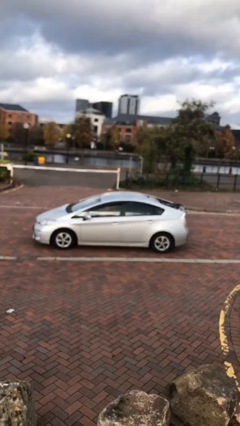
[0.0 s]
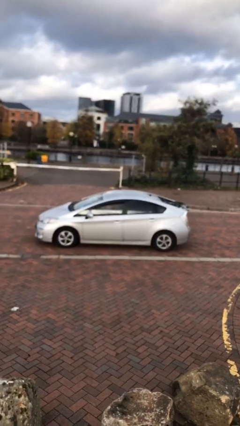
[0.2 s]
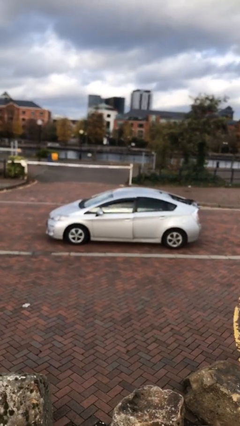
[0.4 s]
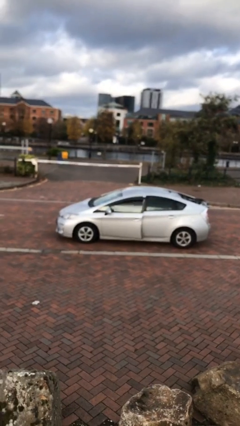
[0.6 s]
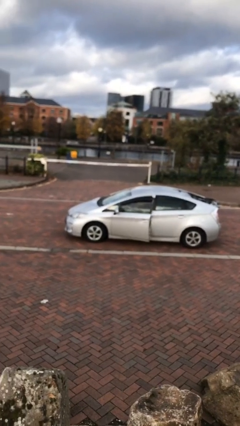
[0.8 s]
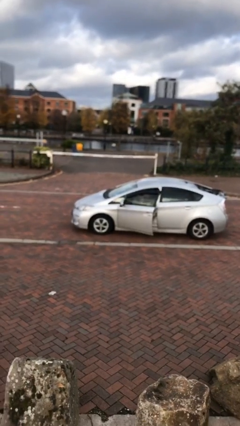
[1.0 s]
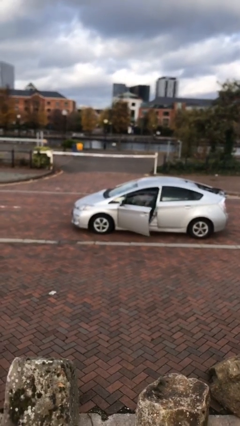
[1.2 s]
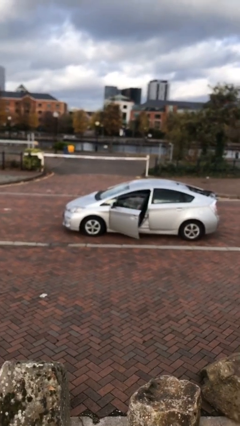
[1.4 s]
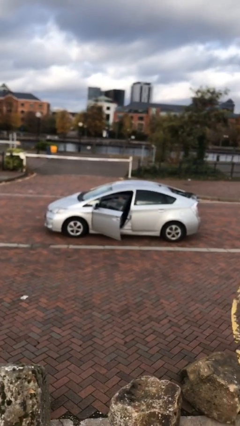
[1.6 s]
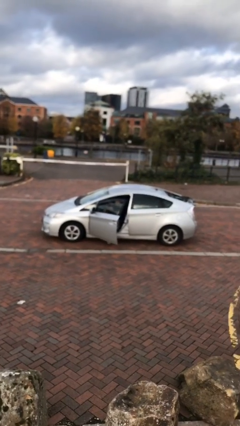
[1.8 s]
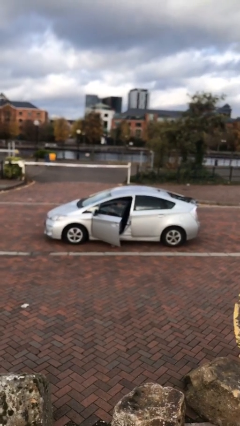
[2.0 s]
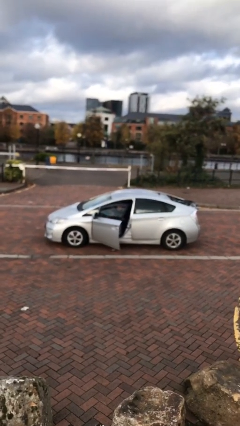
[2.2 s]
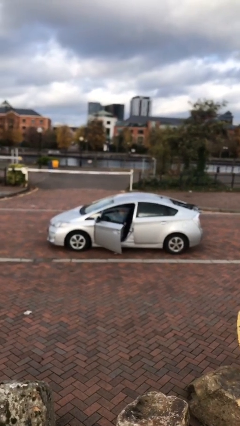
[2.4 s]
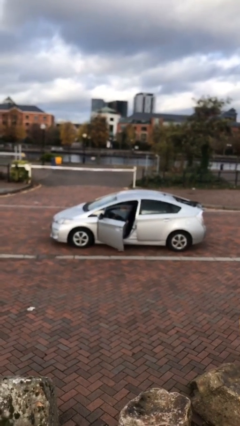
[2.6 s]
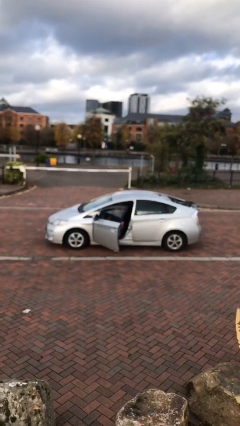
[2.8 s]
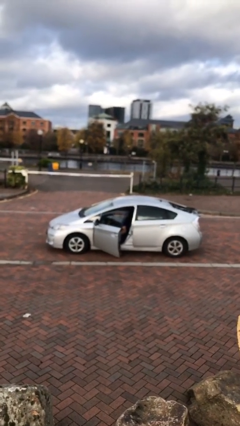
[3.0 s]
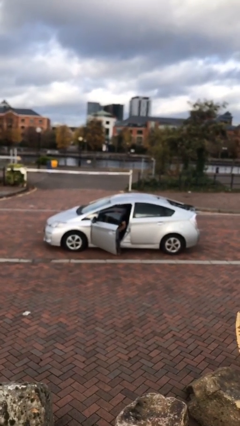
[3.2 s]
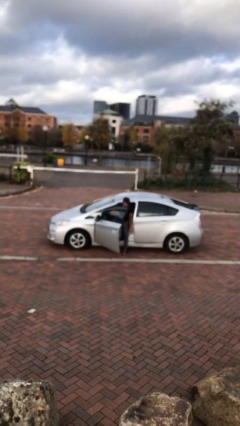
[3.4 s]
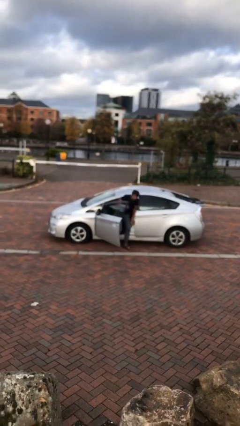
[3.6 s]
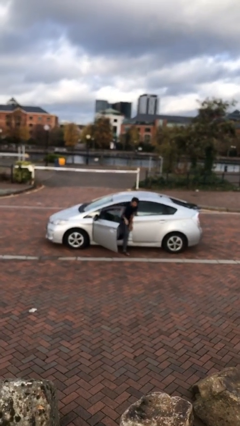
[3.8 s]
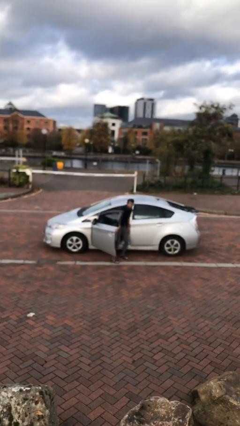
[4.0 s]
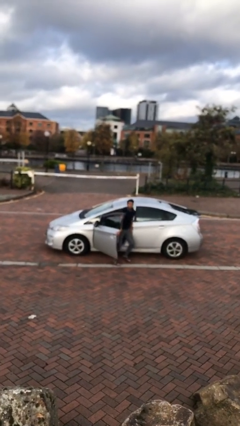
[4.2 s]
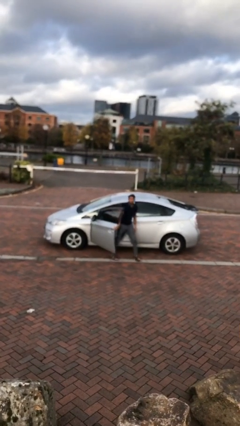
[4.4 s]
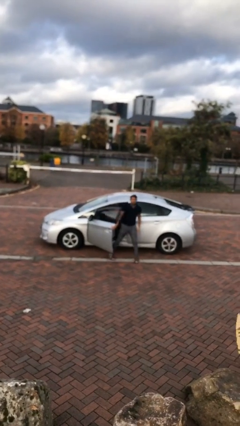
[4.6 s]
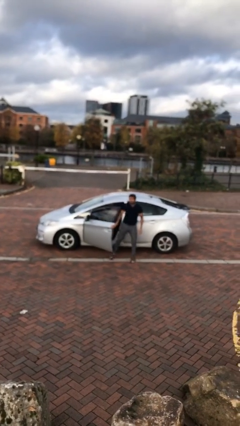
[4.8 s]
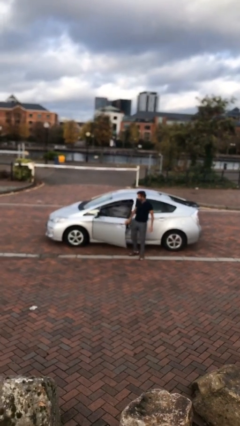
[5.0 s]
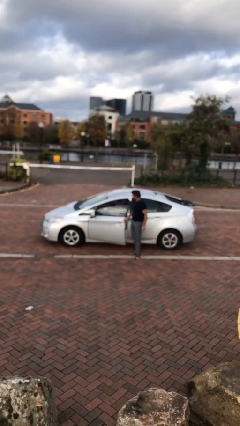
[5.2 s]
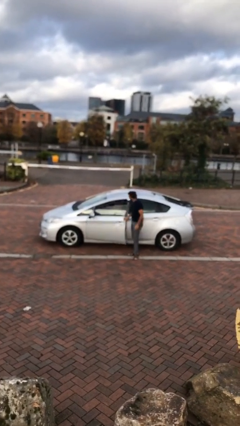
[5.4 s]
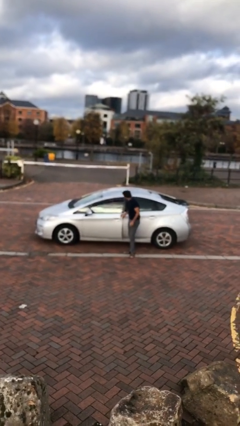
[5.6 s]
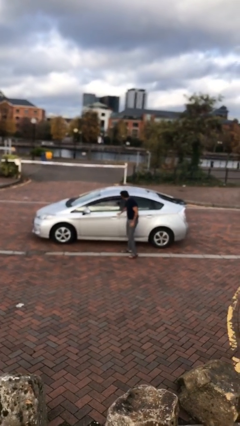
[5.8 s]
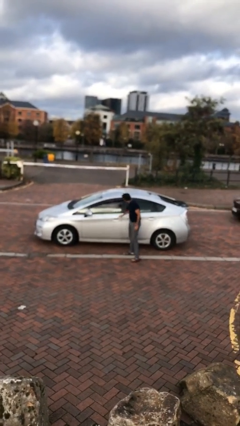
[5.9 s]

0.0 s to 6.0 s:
car drops off person

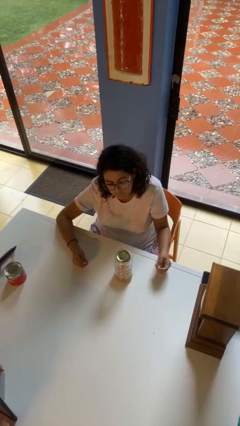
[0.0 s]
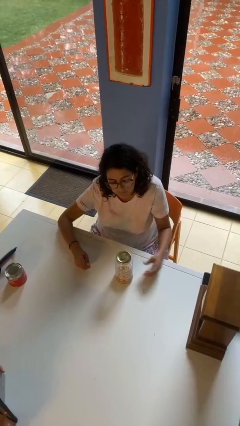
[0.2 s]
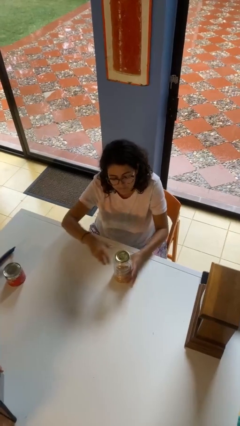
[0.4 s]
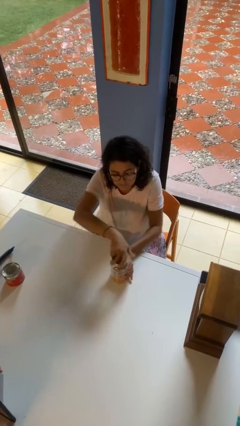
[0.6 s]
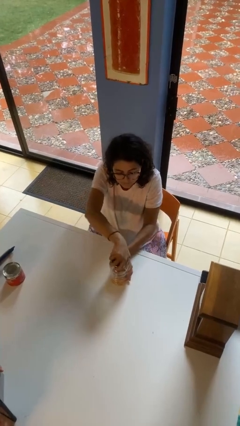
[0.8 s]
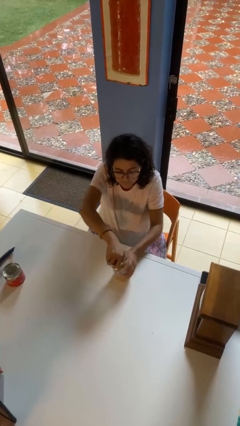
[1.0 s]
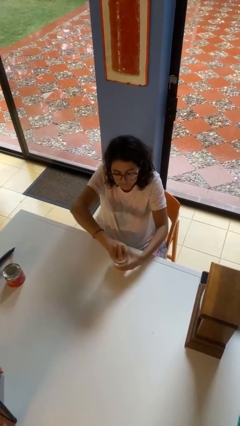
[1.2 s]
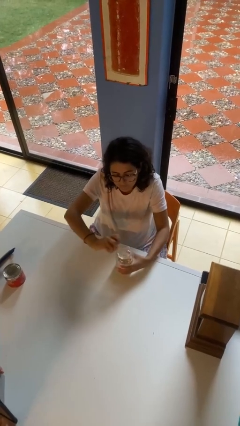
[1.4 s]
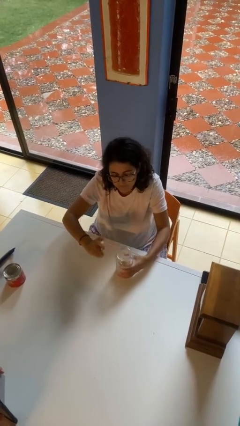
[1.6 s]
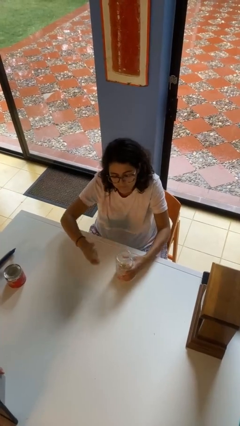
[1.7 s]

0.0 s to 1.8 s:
person opens jar

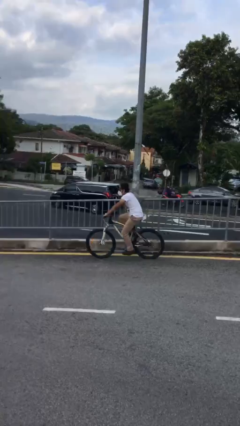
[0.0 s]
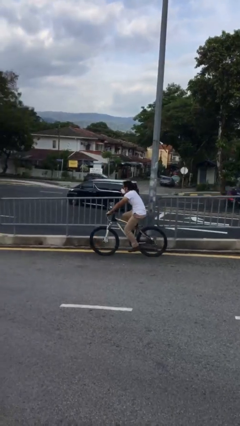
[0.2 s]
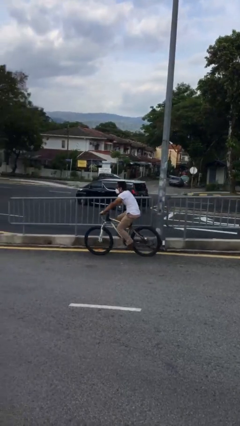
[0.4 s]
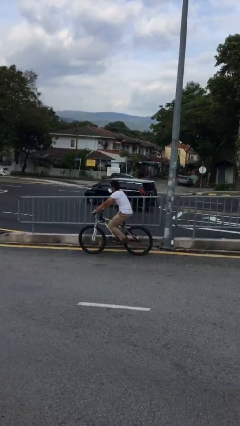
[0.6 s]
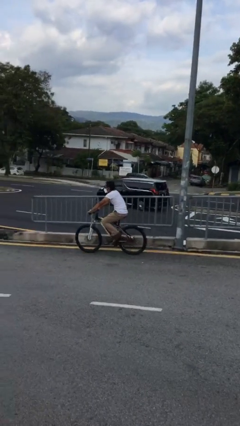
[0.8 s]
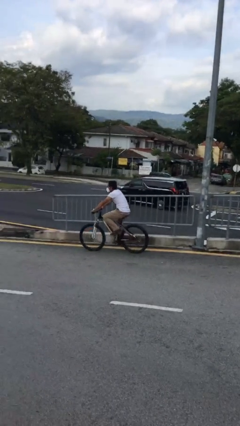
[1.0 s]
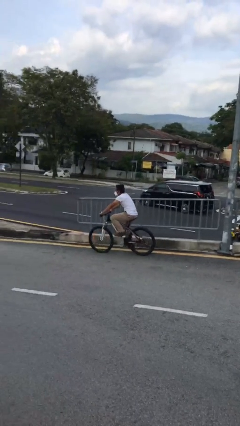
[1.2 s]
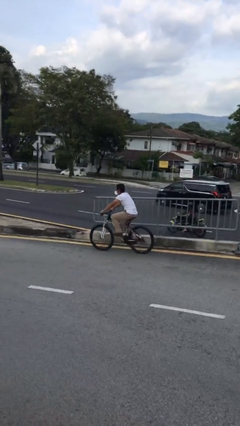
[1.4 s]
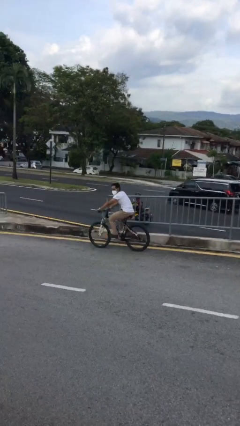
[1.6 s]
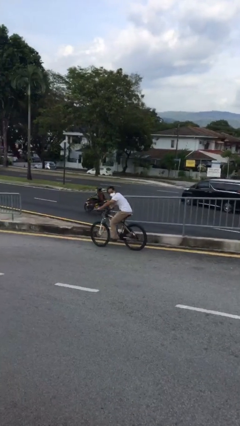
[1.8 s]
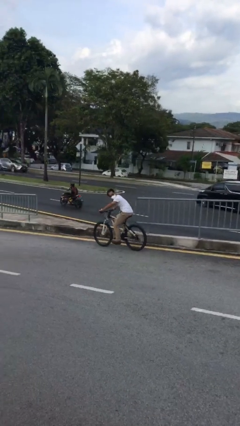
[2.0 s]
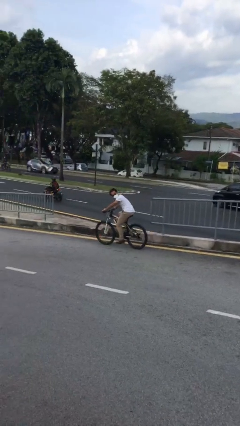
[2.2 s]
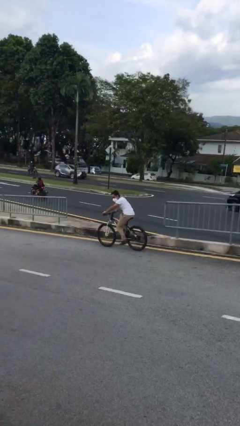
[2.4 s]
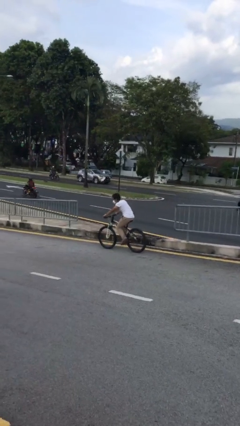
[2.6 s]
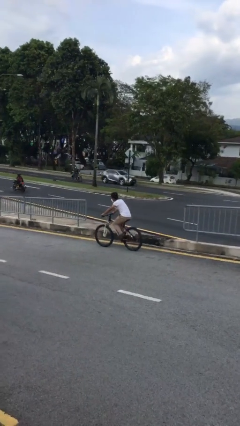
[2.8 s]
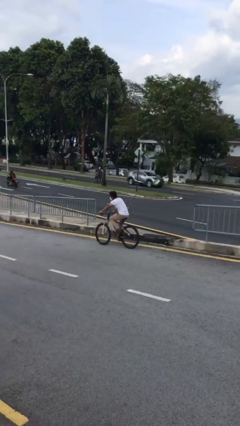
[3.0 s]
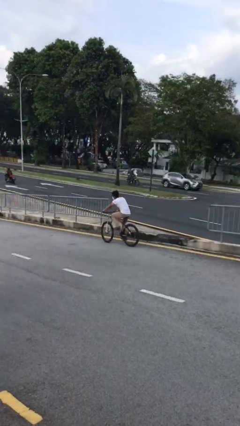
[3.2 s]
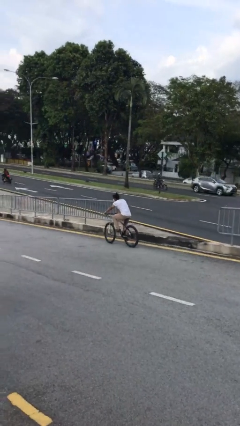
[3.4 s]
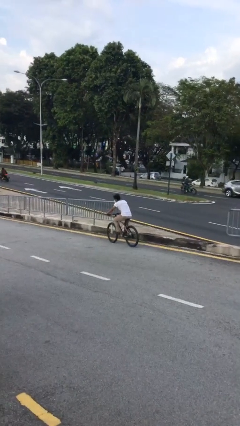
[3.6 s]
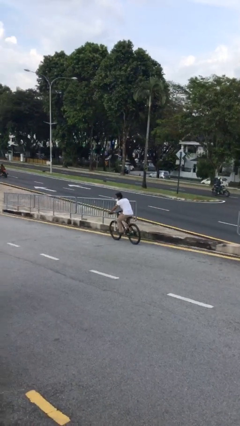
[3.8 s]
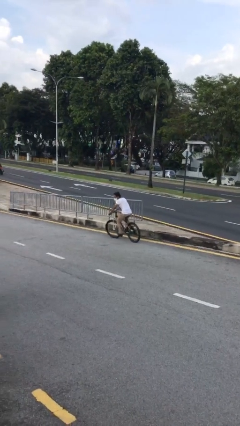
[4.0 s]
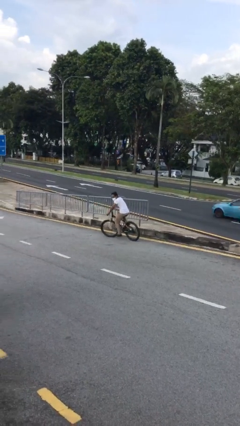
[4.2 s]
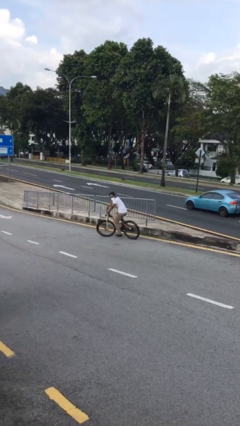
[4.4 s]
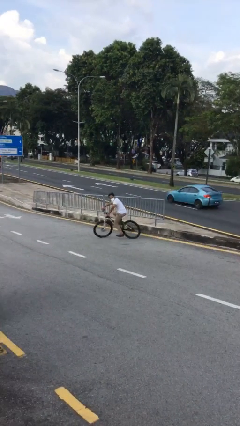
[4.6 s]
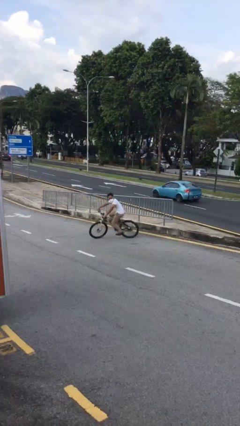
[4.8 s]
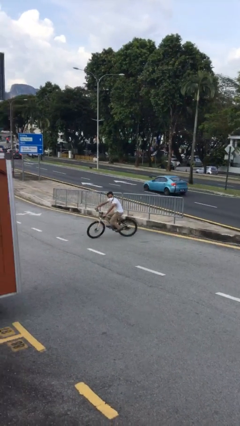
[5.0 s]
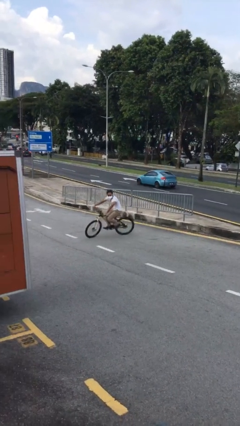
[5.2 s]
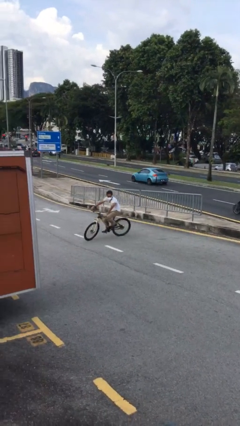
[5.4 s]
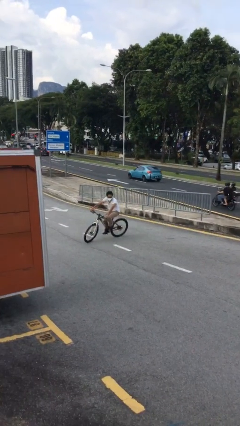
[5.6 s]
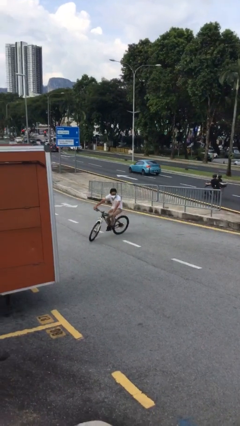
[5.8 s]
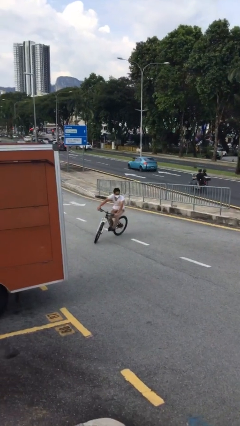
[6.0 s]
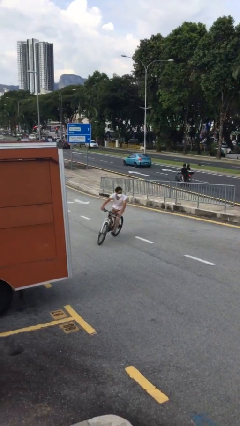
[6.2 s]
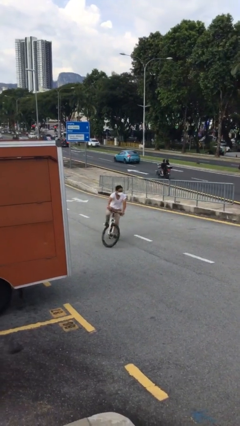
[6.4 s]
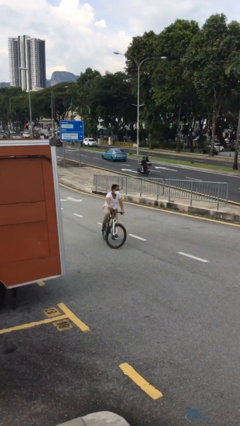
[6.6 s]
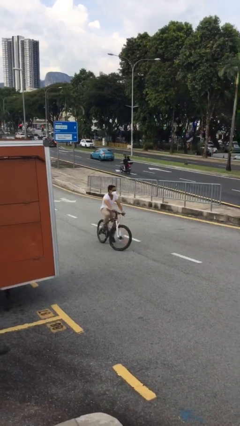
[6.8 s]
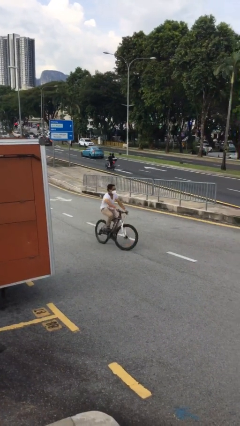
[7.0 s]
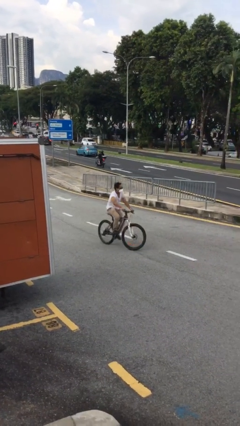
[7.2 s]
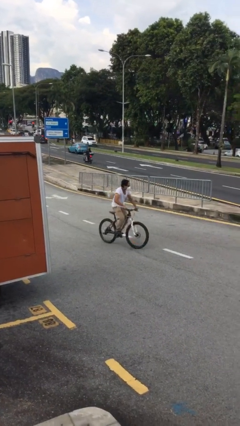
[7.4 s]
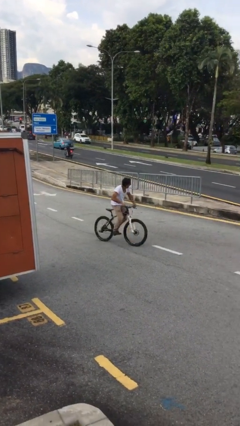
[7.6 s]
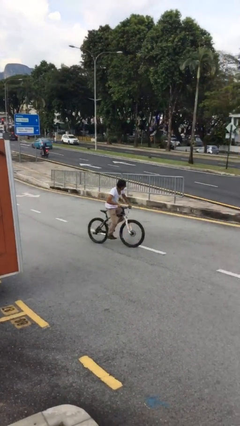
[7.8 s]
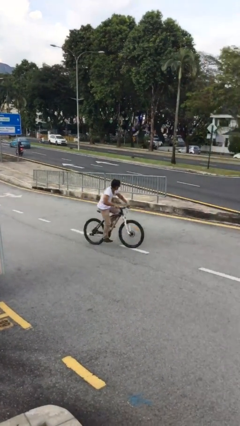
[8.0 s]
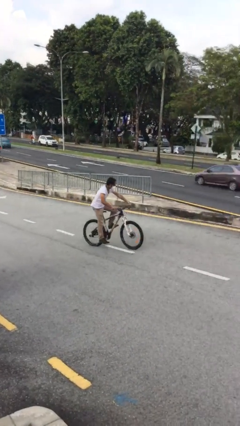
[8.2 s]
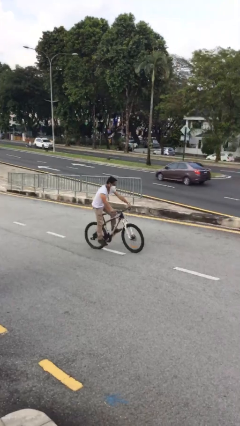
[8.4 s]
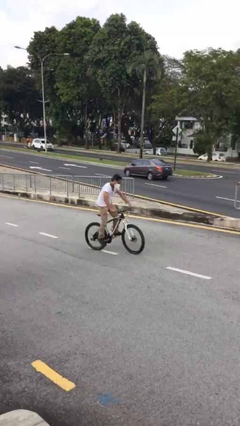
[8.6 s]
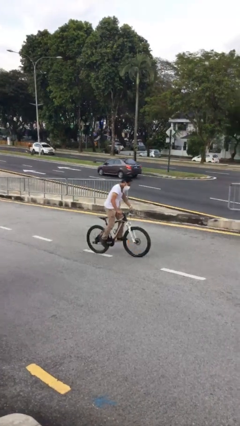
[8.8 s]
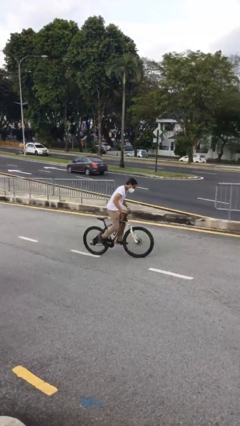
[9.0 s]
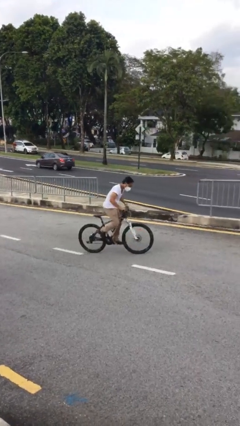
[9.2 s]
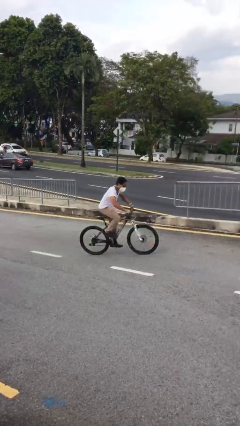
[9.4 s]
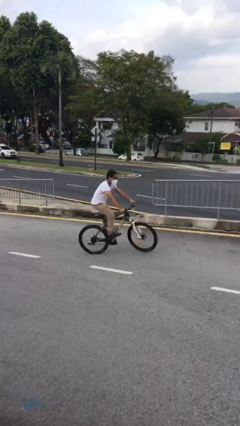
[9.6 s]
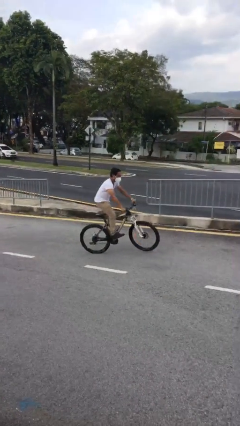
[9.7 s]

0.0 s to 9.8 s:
person rides bicycle
